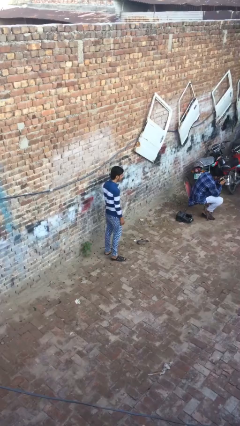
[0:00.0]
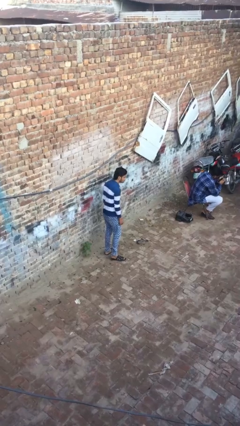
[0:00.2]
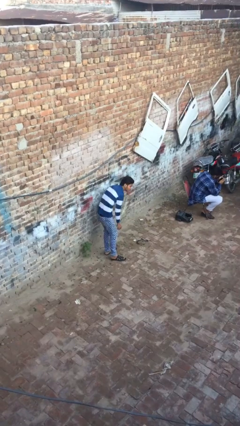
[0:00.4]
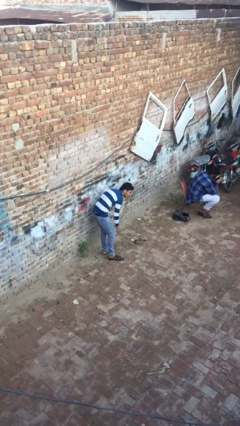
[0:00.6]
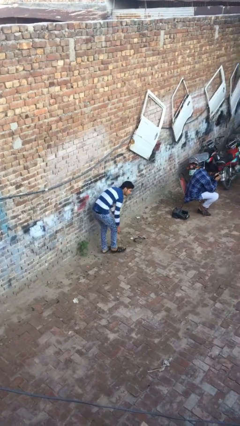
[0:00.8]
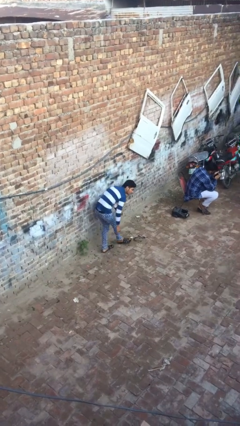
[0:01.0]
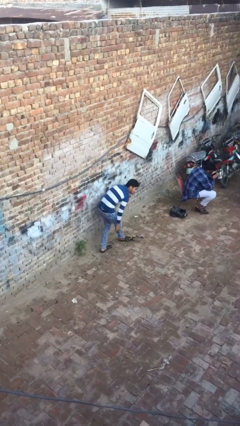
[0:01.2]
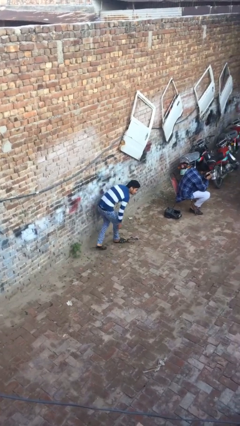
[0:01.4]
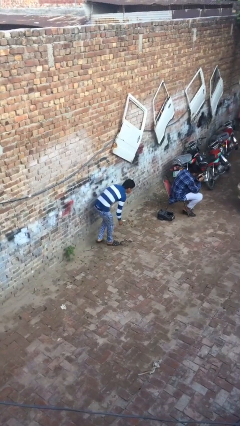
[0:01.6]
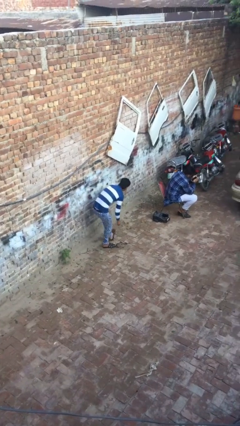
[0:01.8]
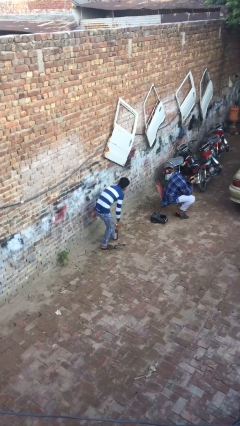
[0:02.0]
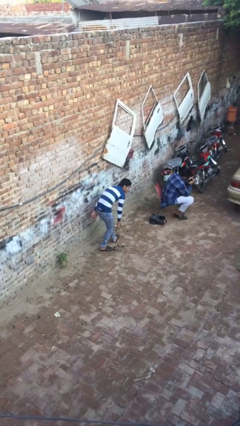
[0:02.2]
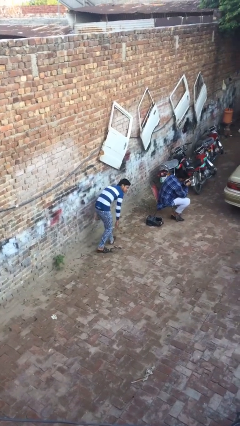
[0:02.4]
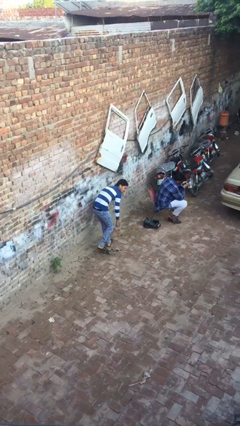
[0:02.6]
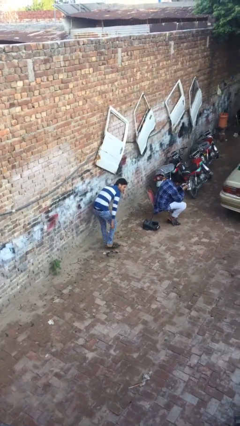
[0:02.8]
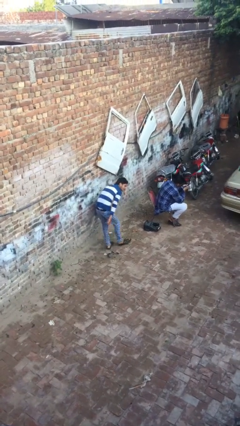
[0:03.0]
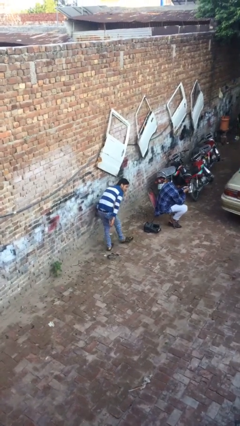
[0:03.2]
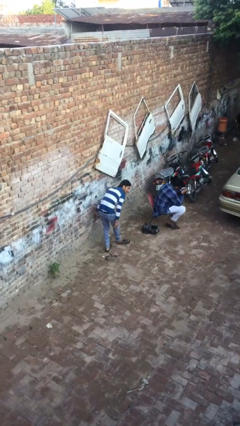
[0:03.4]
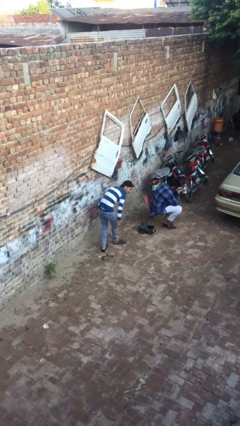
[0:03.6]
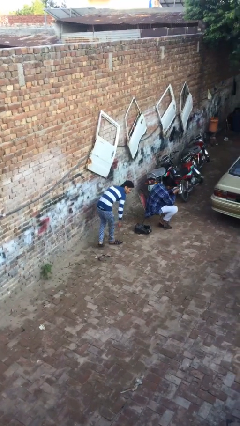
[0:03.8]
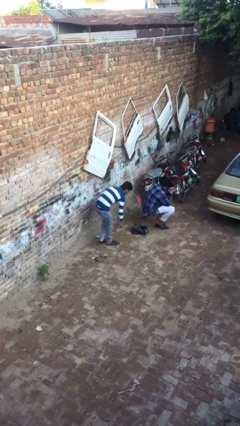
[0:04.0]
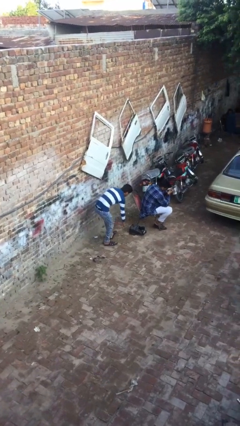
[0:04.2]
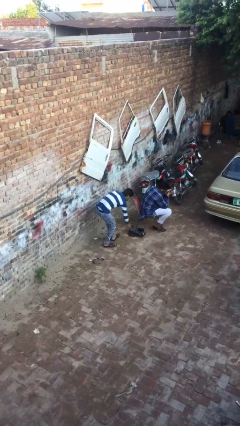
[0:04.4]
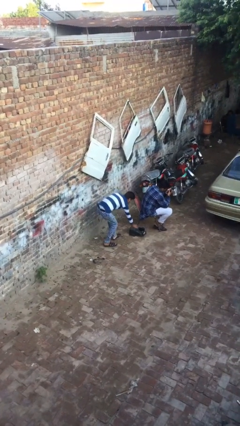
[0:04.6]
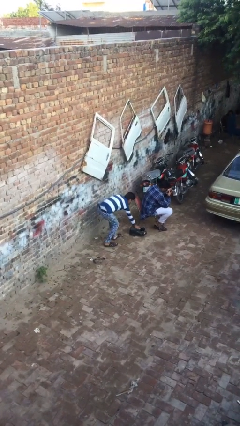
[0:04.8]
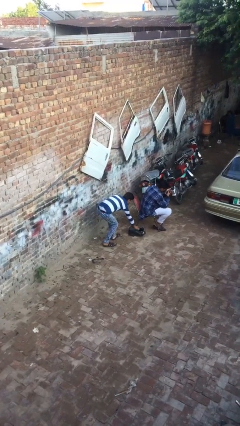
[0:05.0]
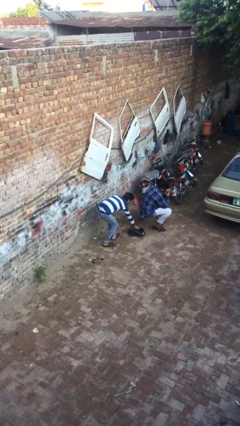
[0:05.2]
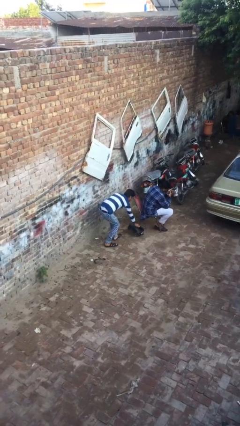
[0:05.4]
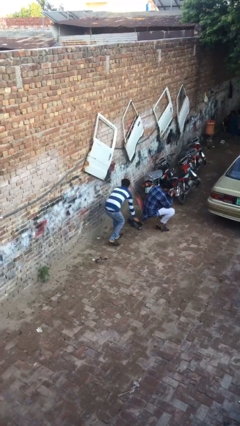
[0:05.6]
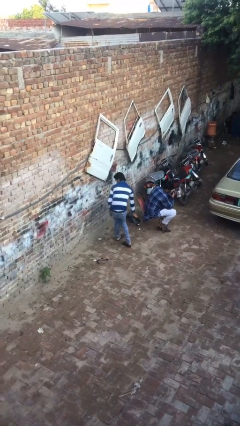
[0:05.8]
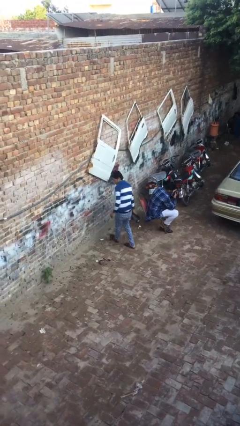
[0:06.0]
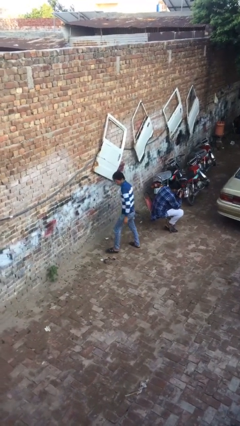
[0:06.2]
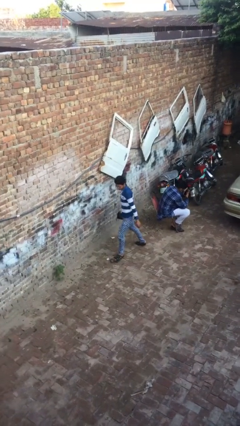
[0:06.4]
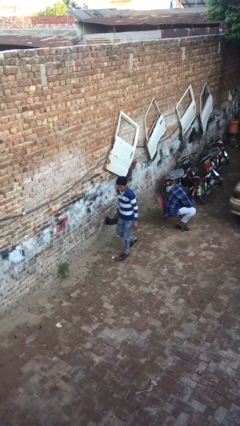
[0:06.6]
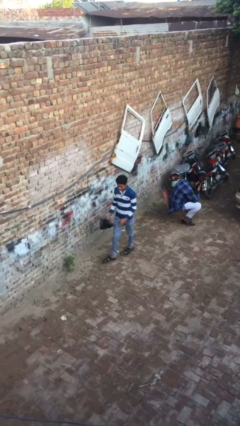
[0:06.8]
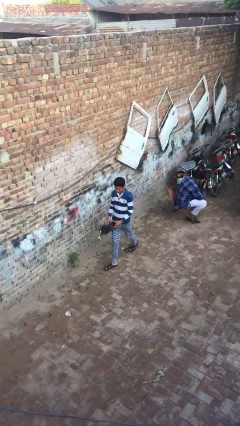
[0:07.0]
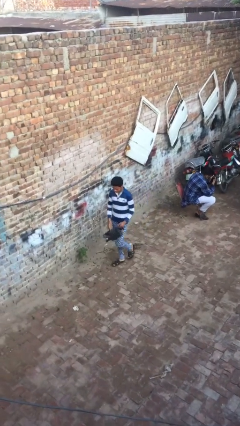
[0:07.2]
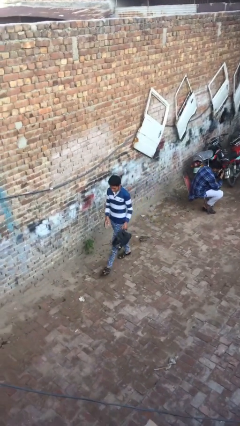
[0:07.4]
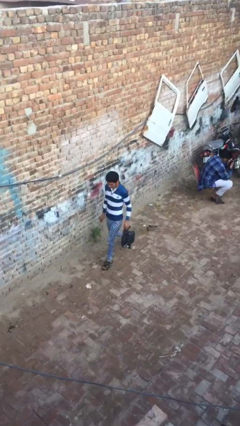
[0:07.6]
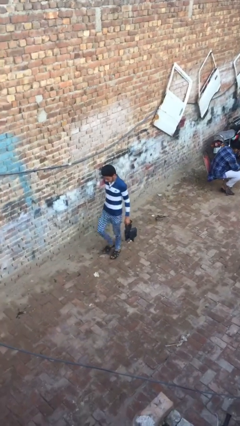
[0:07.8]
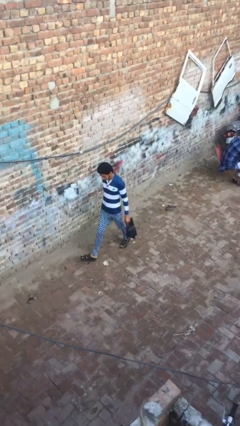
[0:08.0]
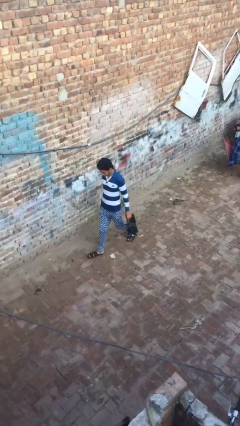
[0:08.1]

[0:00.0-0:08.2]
person steals object from person

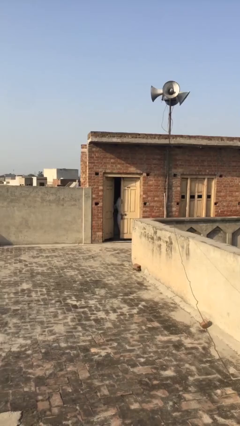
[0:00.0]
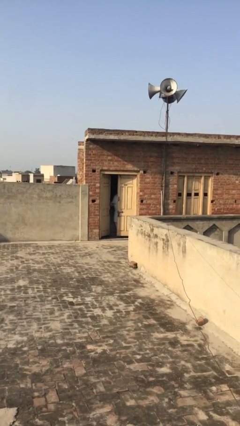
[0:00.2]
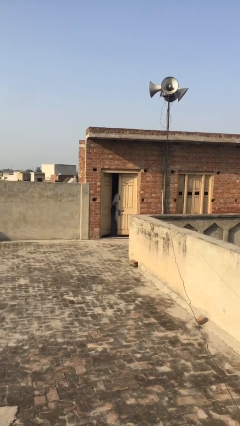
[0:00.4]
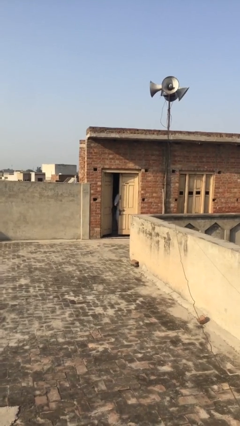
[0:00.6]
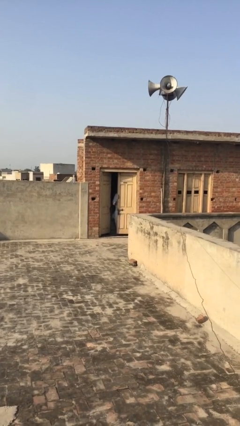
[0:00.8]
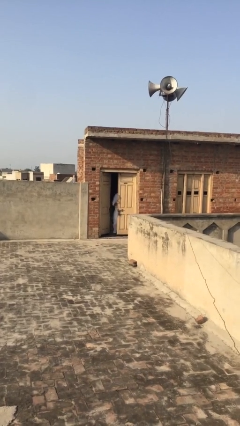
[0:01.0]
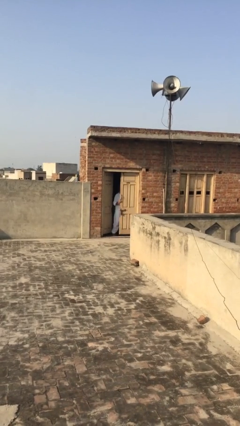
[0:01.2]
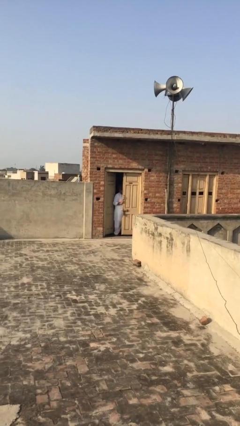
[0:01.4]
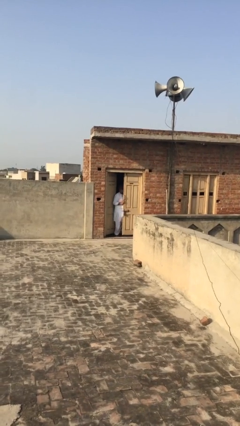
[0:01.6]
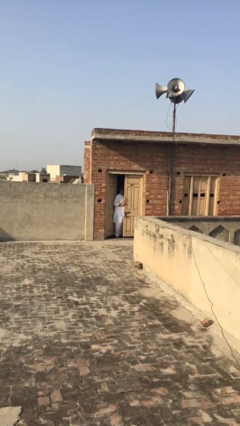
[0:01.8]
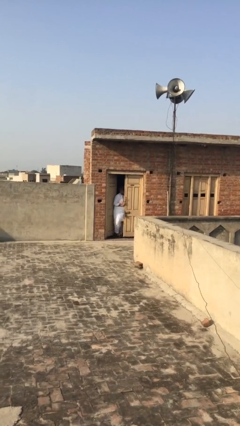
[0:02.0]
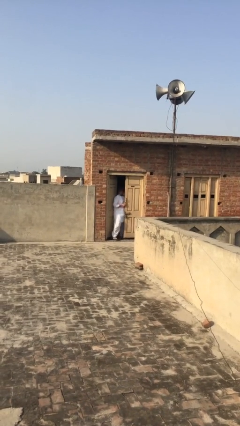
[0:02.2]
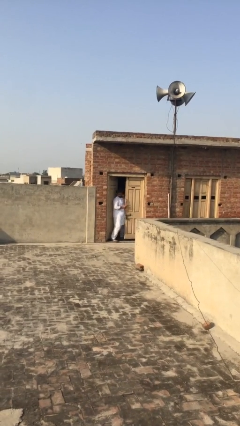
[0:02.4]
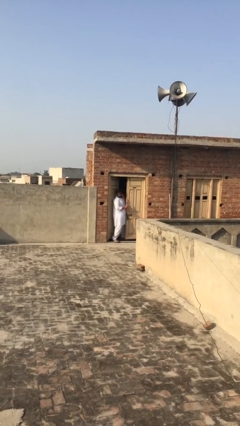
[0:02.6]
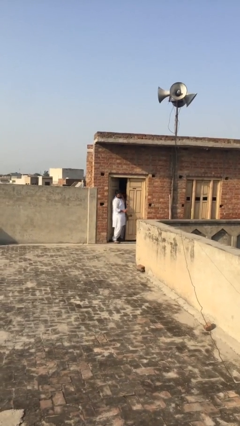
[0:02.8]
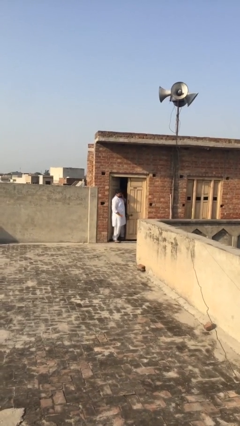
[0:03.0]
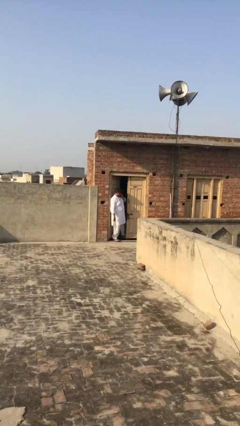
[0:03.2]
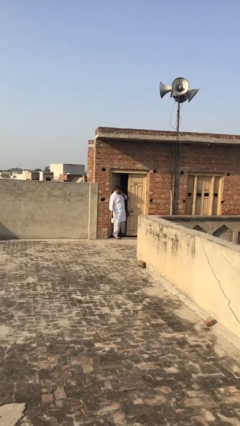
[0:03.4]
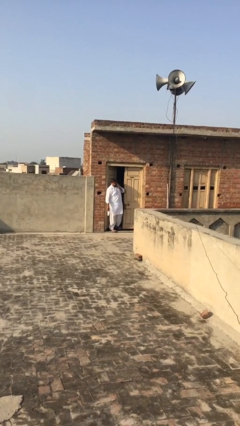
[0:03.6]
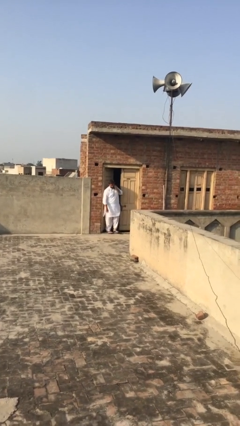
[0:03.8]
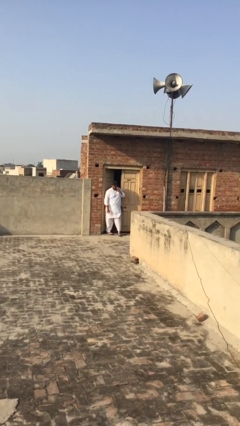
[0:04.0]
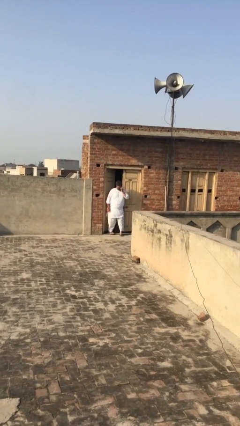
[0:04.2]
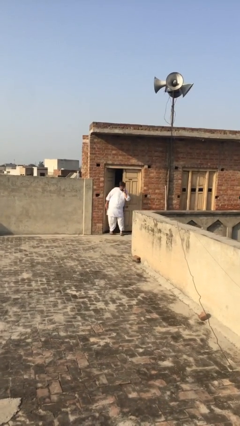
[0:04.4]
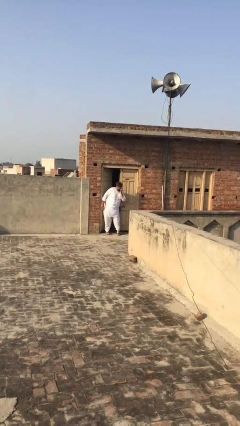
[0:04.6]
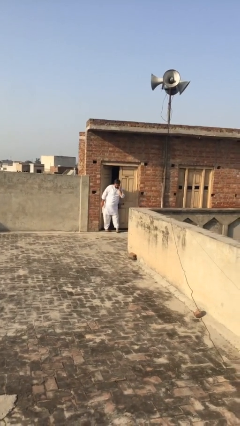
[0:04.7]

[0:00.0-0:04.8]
person enters scene through structure

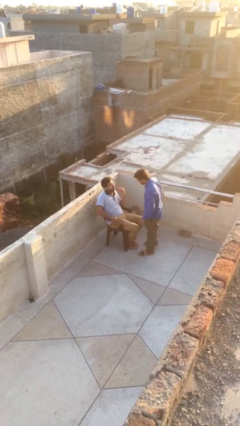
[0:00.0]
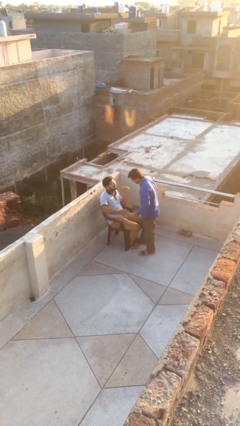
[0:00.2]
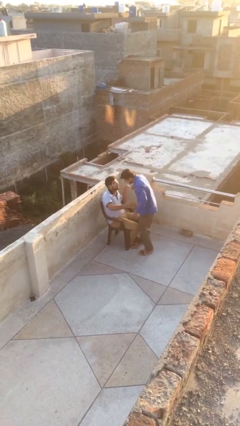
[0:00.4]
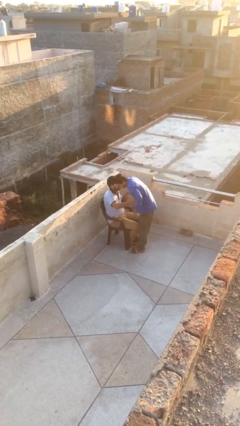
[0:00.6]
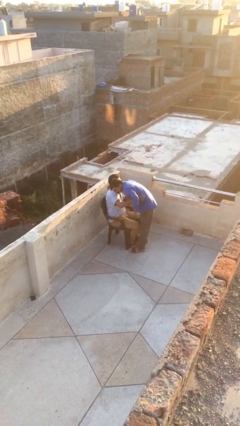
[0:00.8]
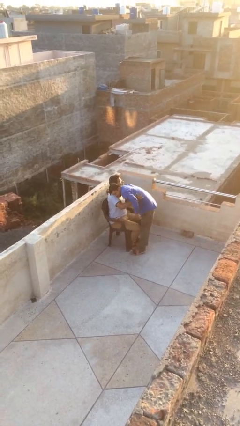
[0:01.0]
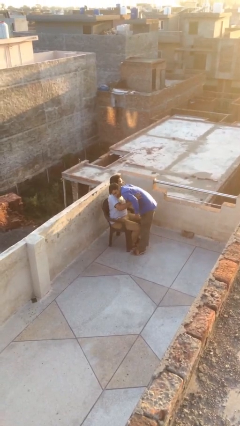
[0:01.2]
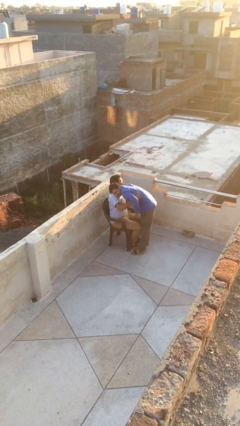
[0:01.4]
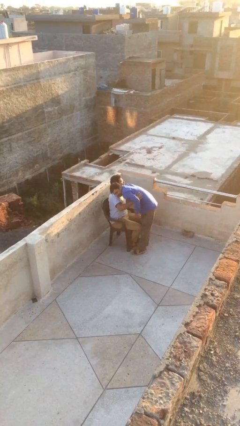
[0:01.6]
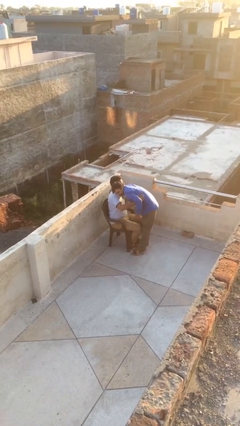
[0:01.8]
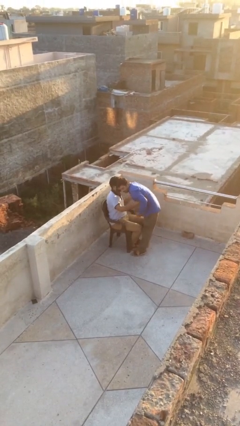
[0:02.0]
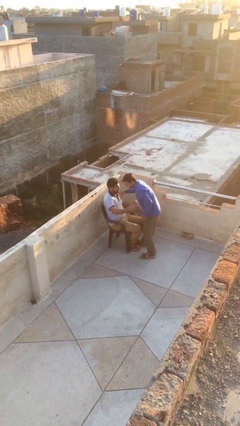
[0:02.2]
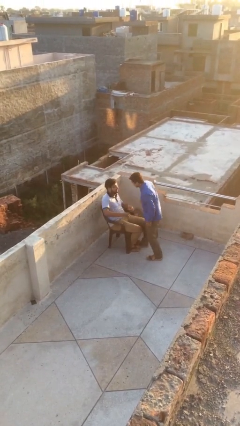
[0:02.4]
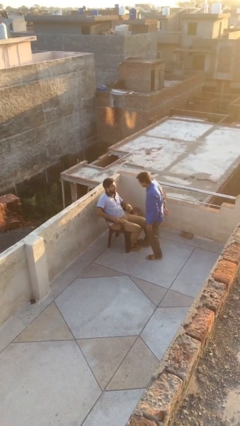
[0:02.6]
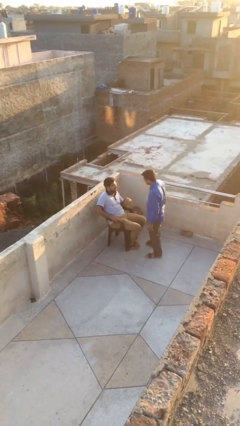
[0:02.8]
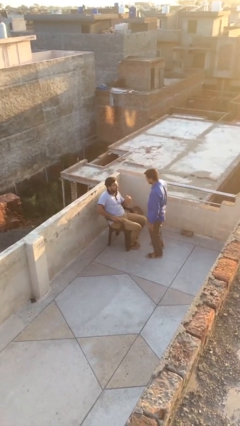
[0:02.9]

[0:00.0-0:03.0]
person embraces person

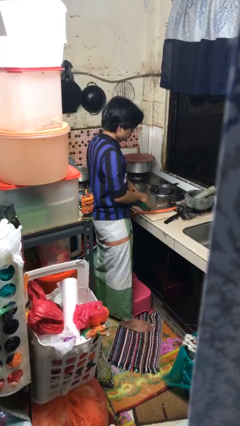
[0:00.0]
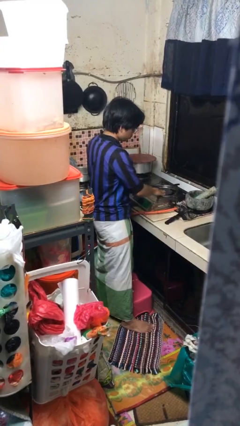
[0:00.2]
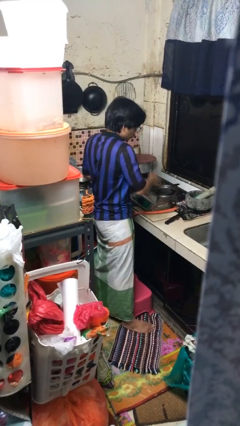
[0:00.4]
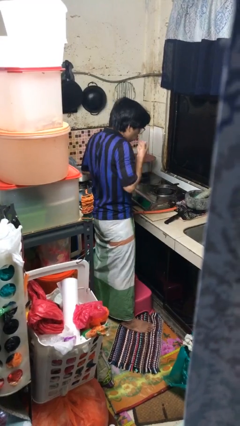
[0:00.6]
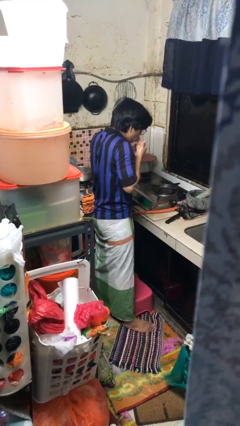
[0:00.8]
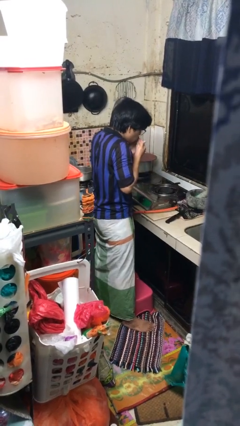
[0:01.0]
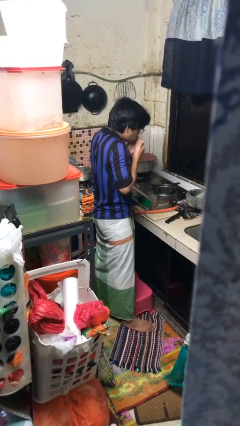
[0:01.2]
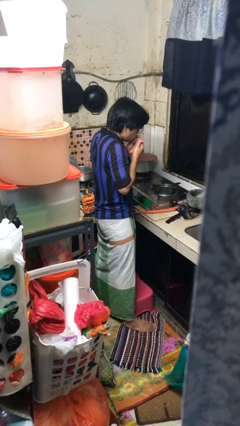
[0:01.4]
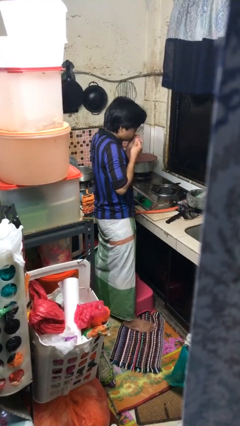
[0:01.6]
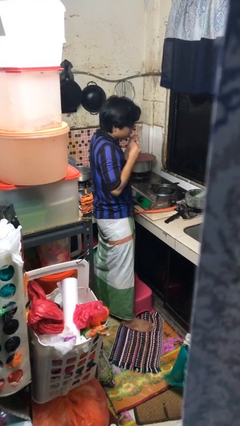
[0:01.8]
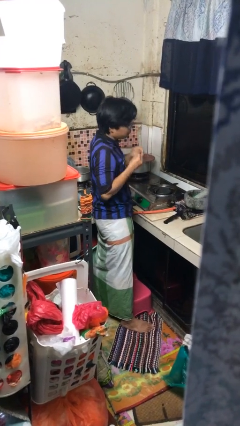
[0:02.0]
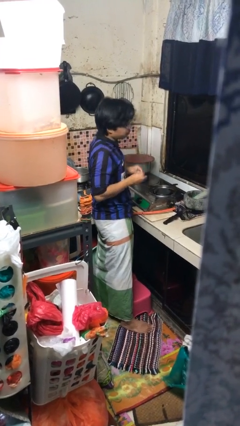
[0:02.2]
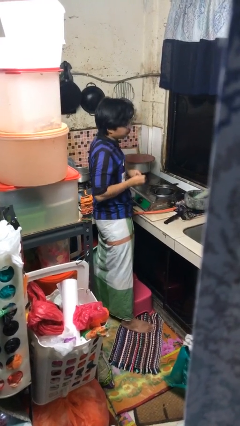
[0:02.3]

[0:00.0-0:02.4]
person burns hand
